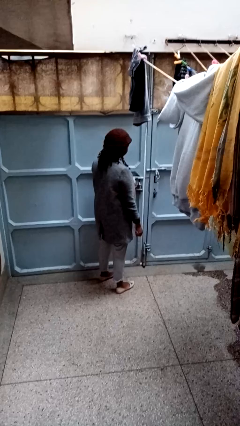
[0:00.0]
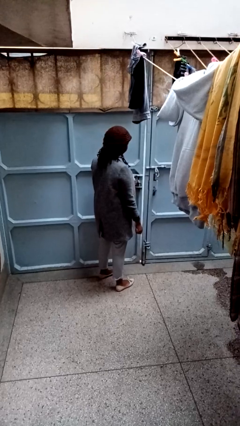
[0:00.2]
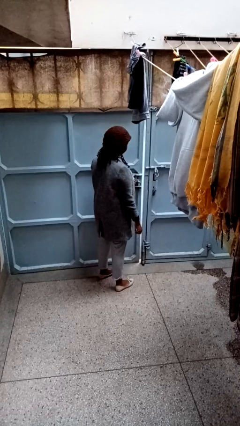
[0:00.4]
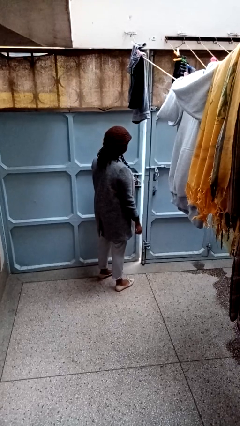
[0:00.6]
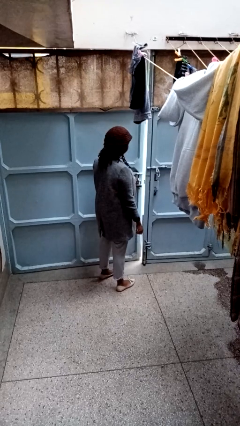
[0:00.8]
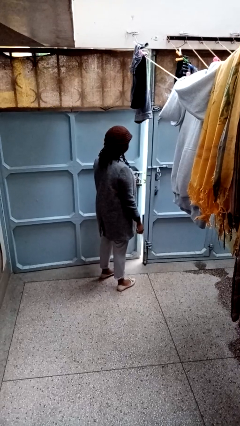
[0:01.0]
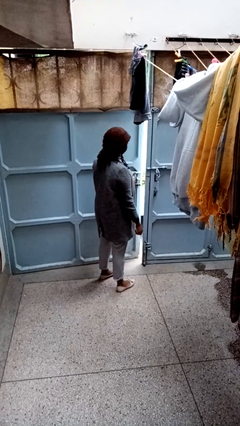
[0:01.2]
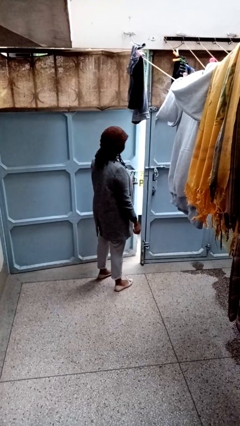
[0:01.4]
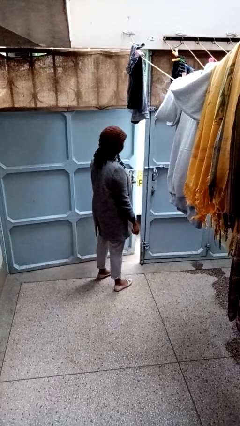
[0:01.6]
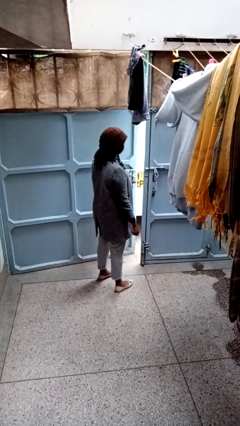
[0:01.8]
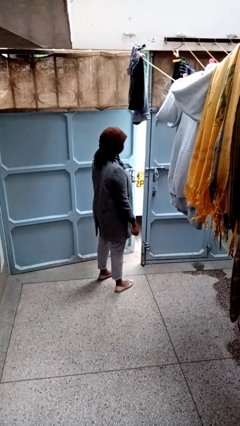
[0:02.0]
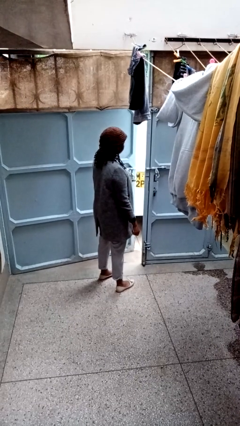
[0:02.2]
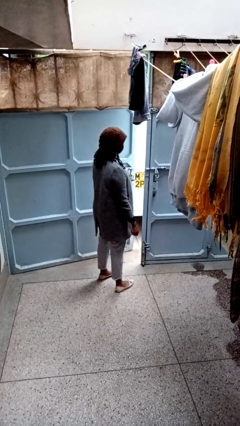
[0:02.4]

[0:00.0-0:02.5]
person opens gate

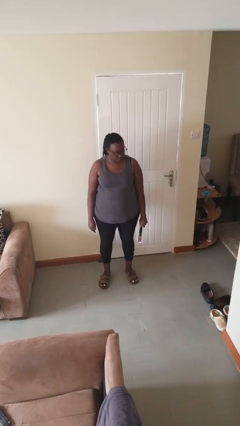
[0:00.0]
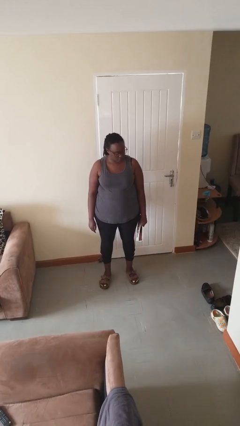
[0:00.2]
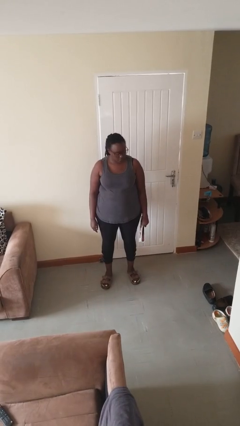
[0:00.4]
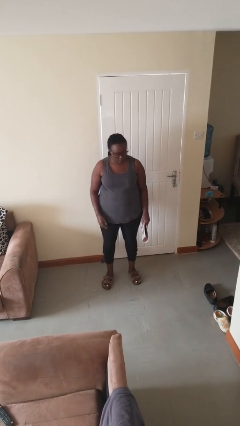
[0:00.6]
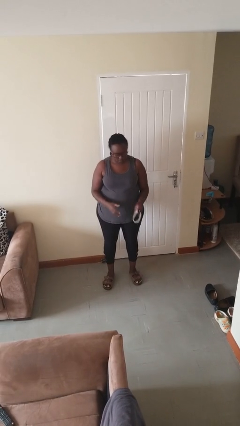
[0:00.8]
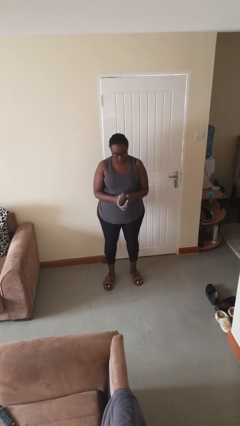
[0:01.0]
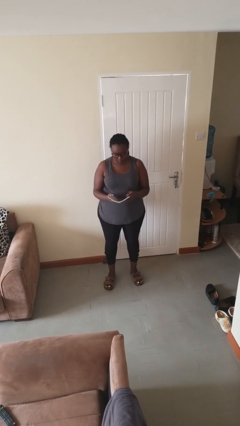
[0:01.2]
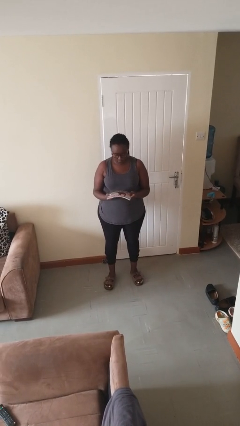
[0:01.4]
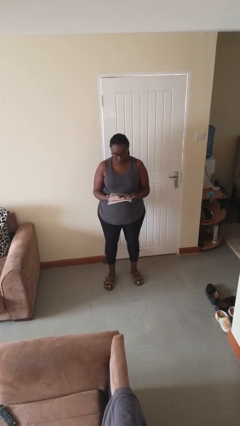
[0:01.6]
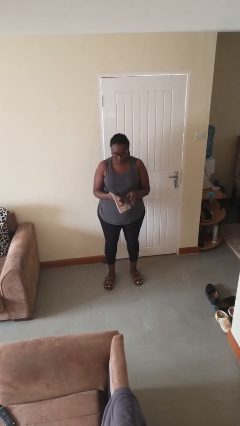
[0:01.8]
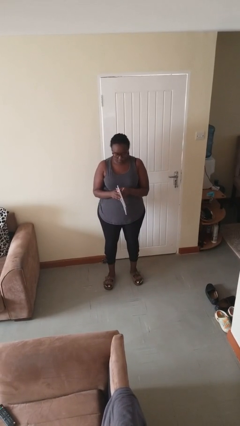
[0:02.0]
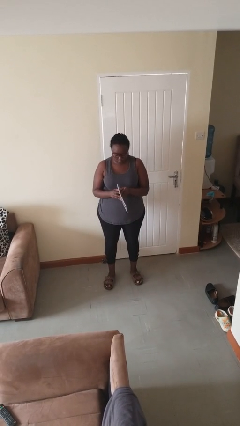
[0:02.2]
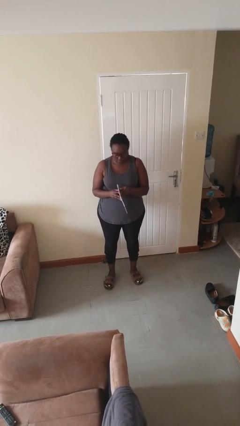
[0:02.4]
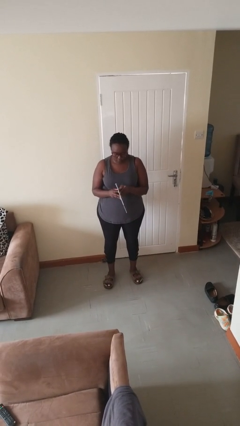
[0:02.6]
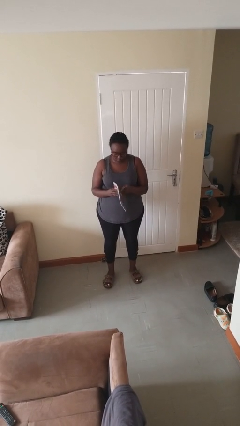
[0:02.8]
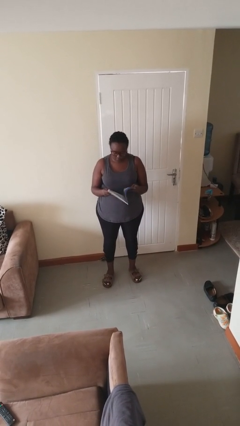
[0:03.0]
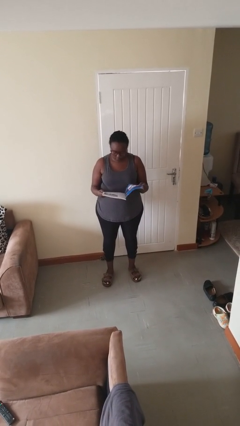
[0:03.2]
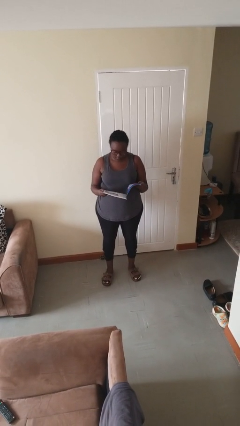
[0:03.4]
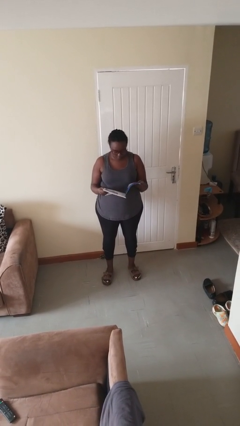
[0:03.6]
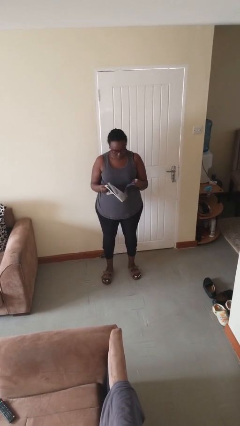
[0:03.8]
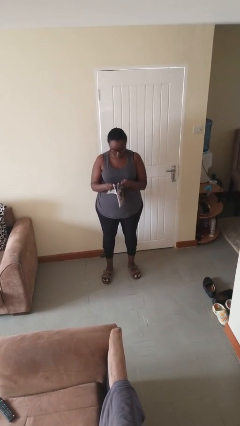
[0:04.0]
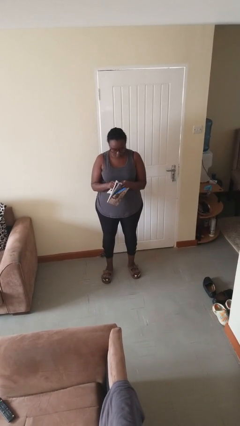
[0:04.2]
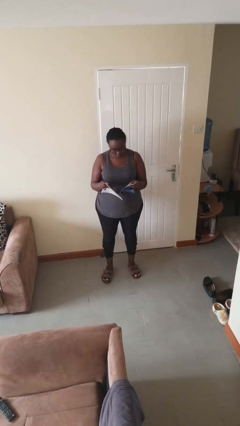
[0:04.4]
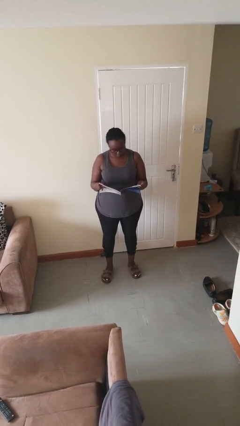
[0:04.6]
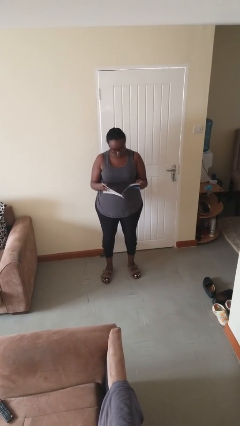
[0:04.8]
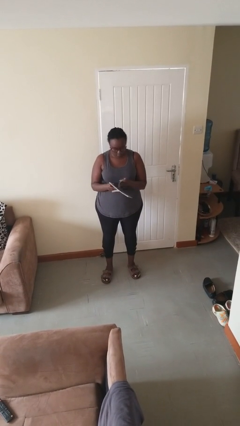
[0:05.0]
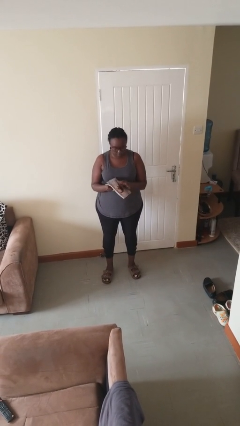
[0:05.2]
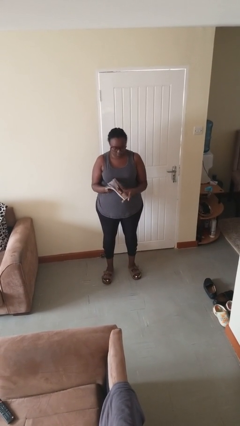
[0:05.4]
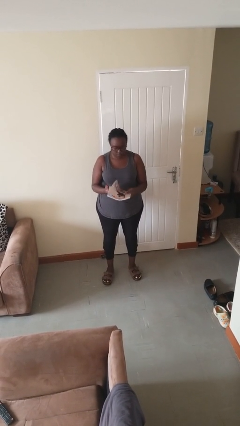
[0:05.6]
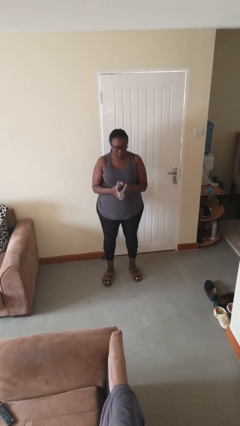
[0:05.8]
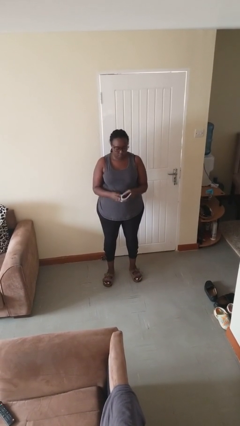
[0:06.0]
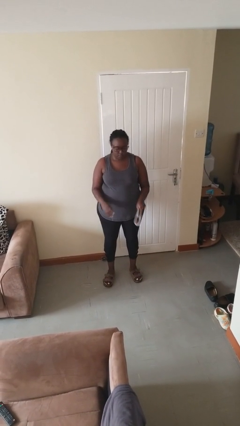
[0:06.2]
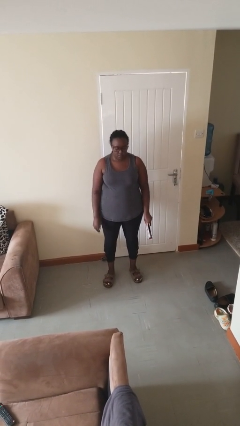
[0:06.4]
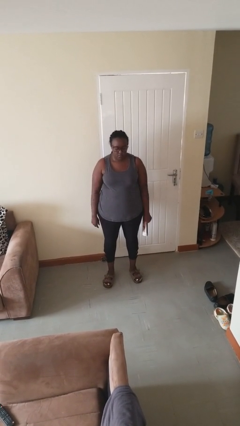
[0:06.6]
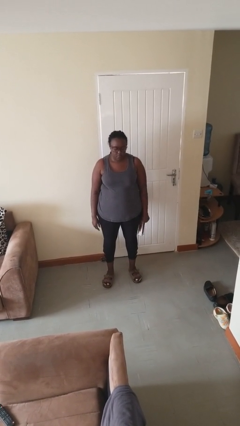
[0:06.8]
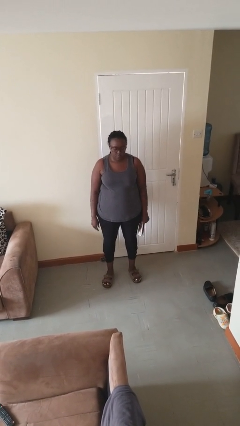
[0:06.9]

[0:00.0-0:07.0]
person reads magazine

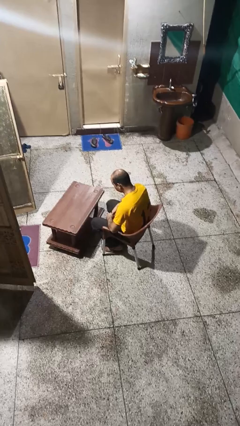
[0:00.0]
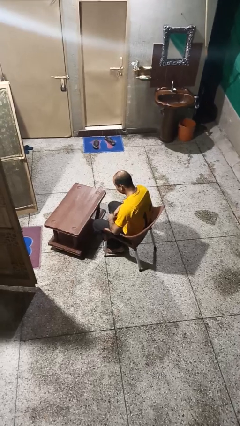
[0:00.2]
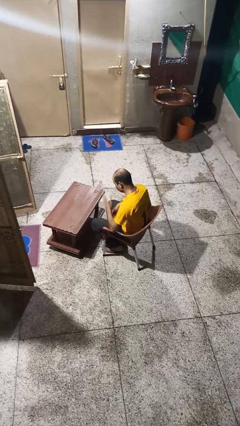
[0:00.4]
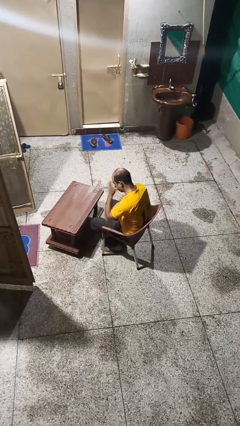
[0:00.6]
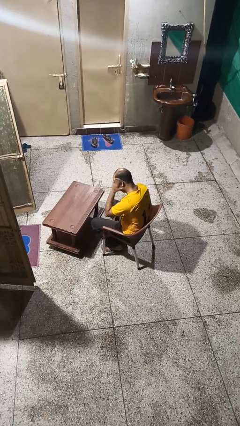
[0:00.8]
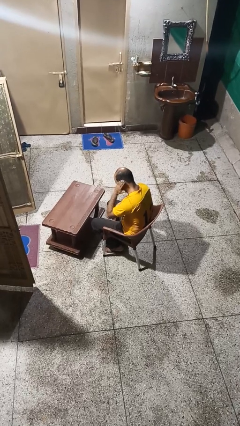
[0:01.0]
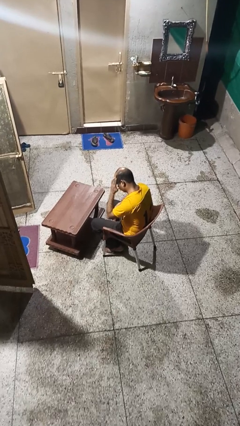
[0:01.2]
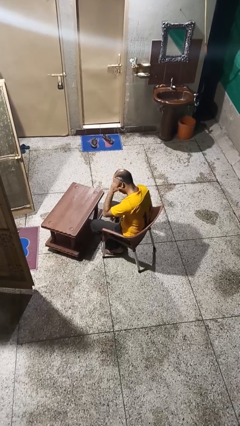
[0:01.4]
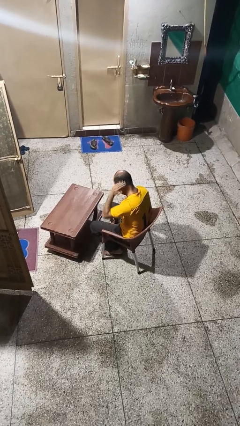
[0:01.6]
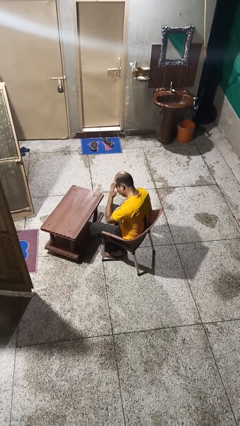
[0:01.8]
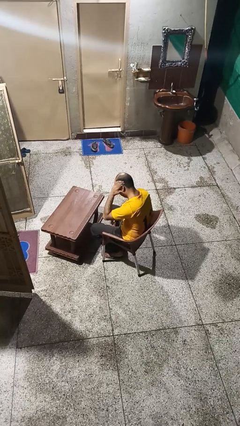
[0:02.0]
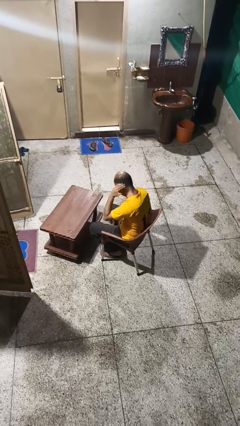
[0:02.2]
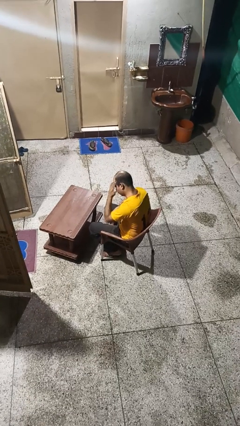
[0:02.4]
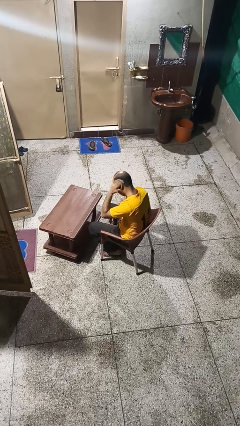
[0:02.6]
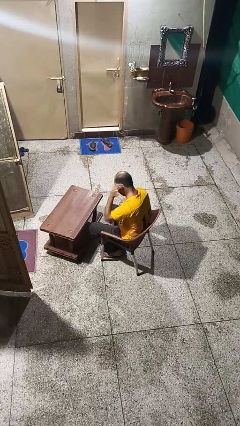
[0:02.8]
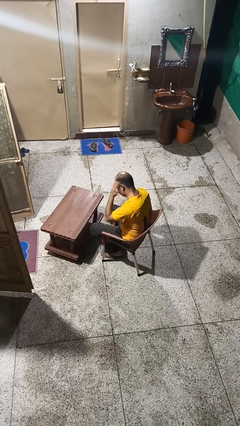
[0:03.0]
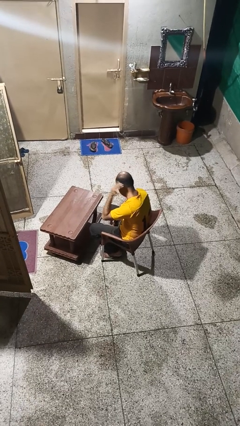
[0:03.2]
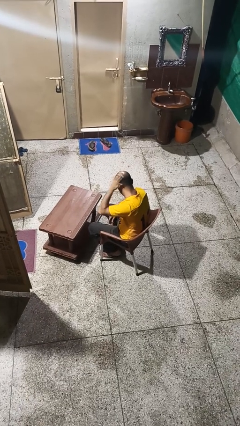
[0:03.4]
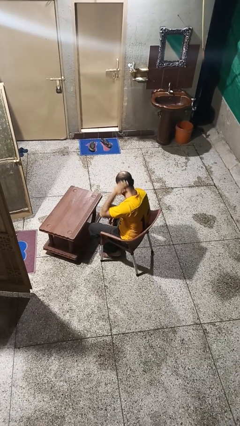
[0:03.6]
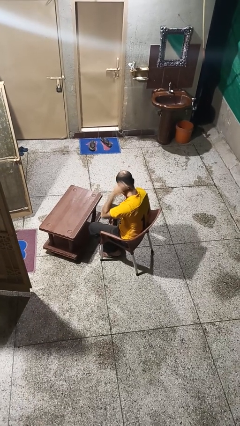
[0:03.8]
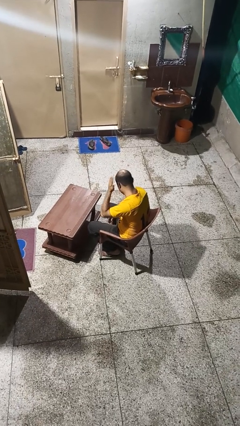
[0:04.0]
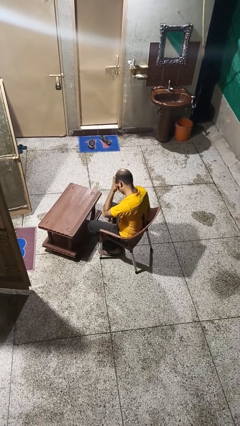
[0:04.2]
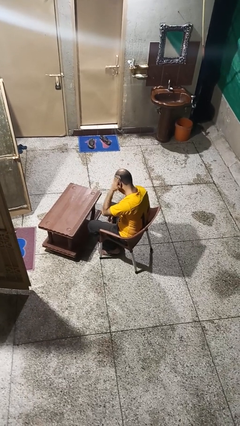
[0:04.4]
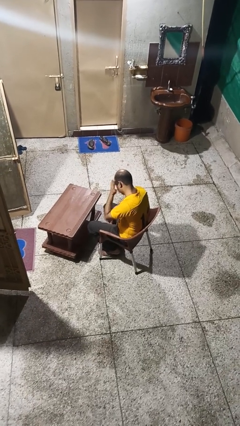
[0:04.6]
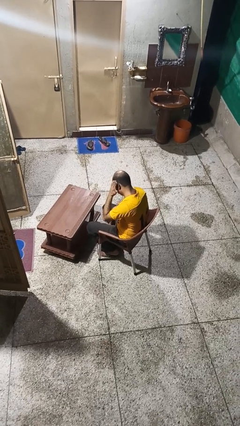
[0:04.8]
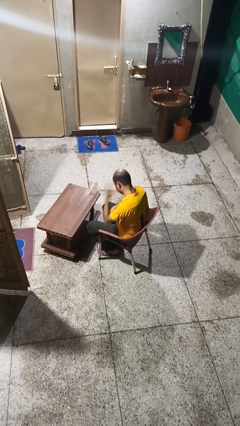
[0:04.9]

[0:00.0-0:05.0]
person strokes hair

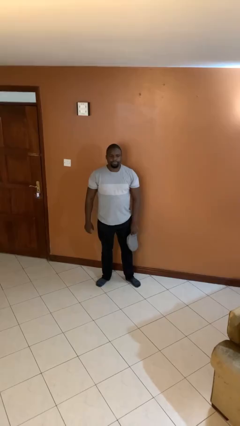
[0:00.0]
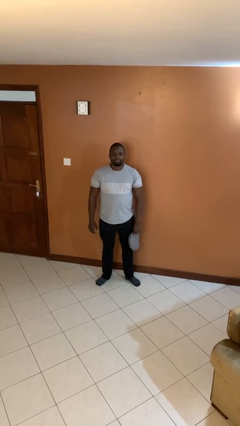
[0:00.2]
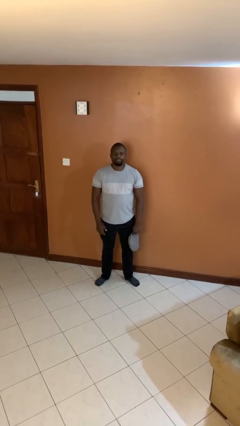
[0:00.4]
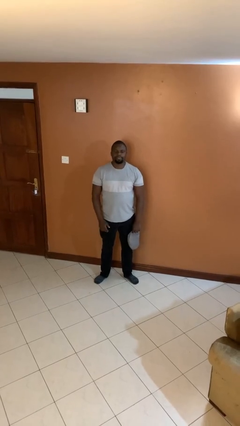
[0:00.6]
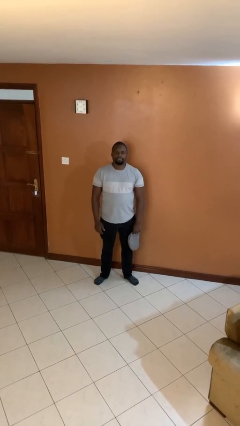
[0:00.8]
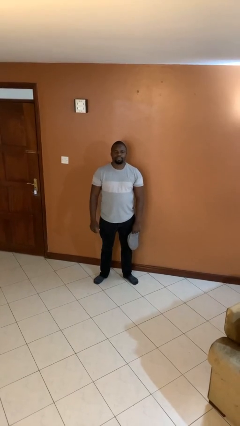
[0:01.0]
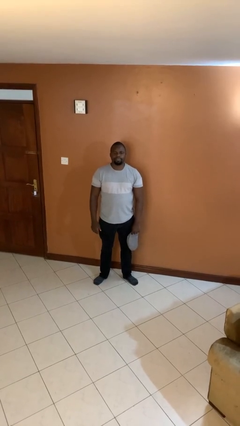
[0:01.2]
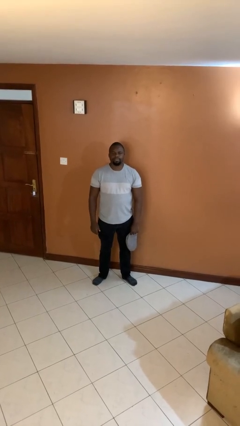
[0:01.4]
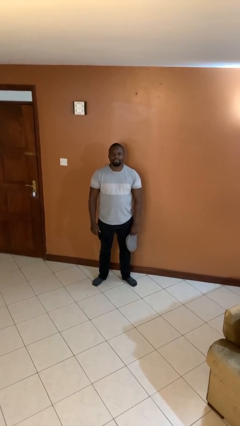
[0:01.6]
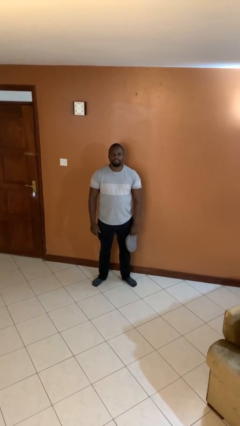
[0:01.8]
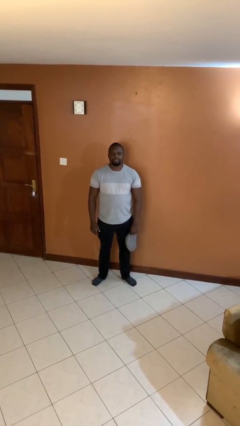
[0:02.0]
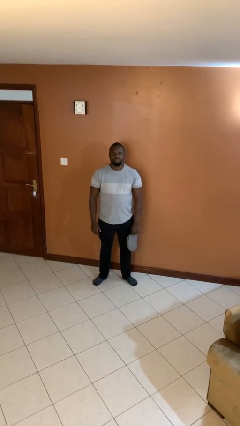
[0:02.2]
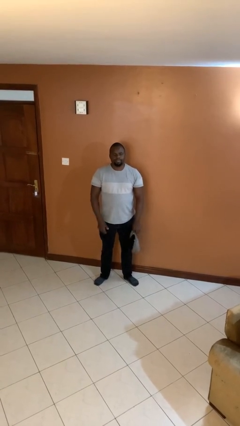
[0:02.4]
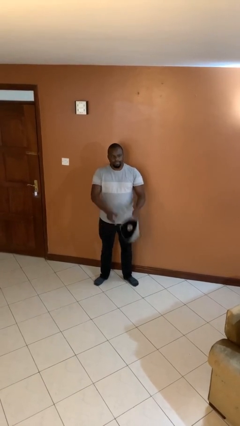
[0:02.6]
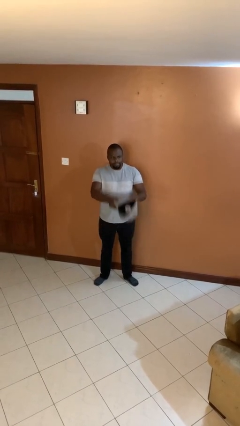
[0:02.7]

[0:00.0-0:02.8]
person takes off hat

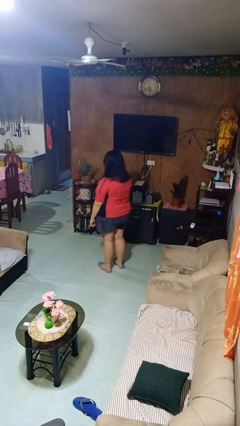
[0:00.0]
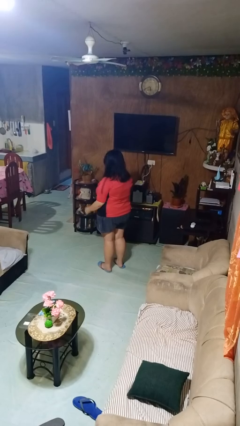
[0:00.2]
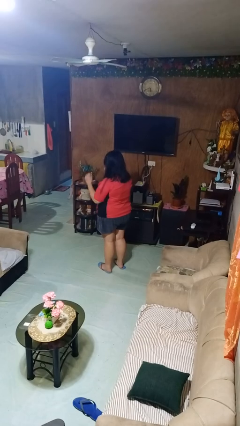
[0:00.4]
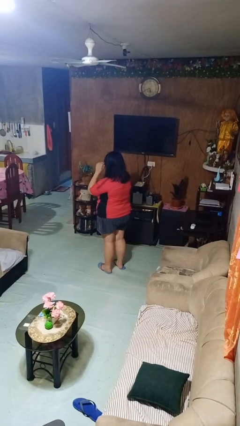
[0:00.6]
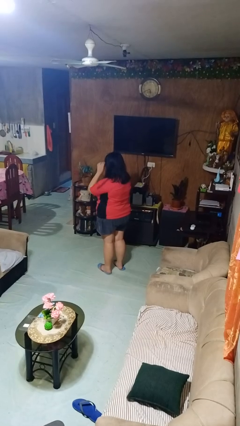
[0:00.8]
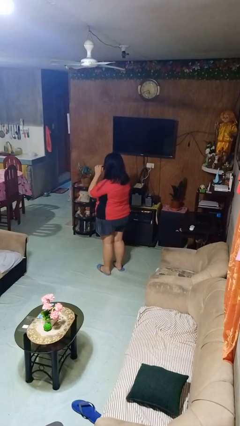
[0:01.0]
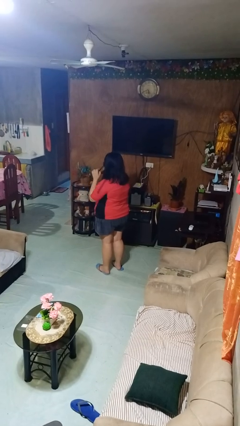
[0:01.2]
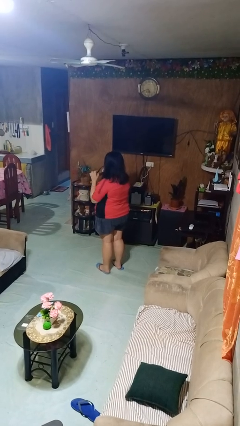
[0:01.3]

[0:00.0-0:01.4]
person takes off sunglasses
